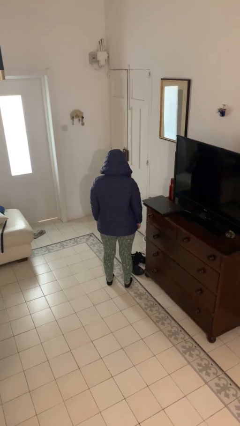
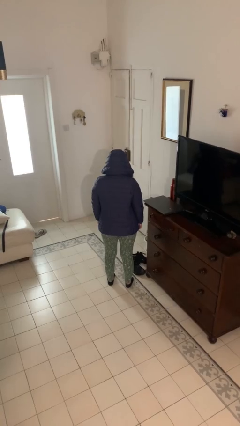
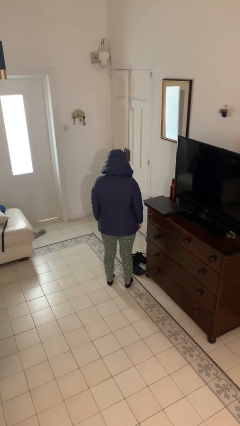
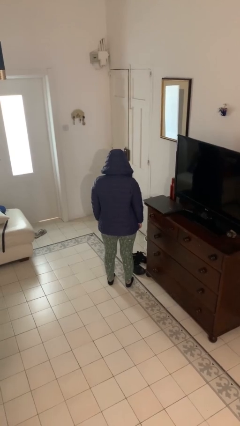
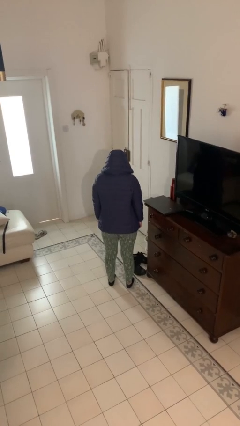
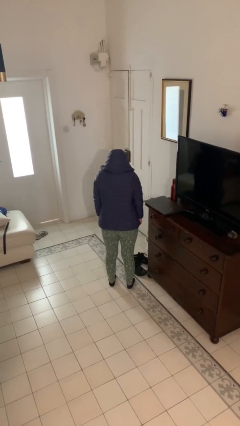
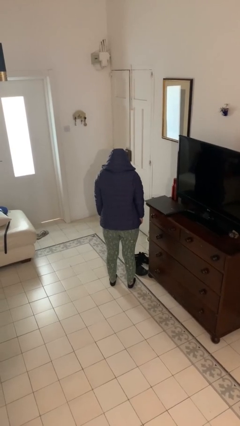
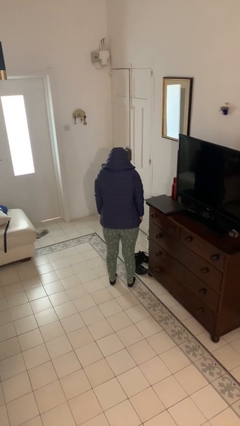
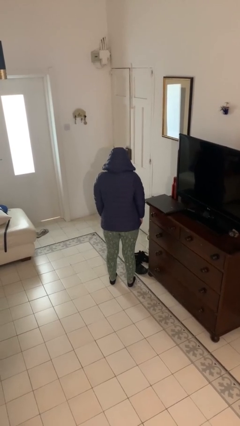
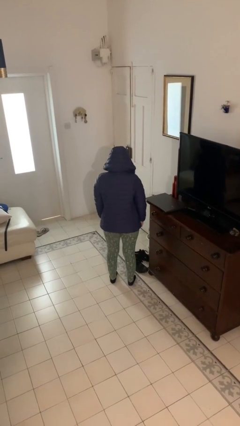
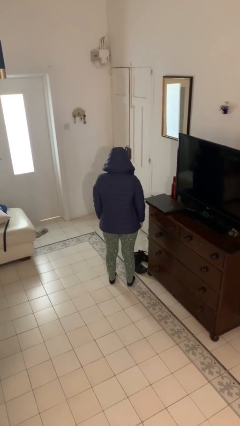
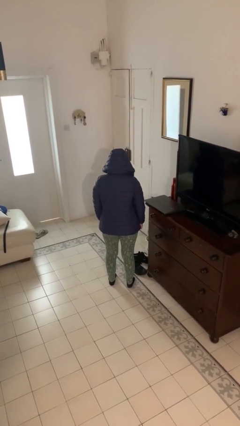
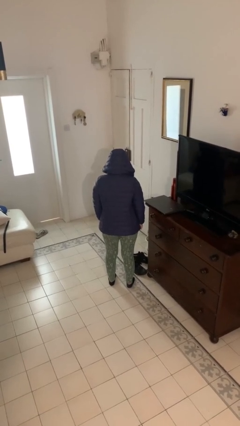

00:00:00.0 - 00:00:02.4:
person shrugs

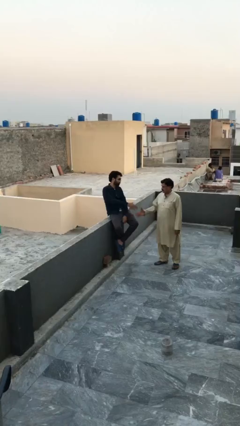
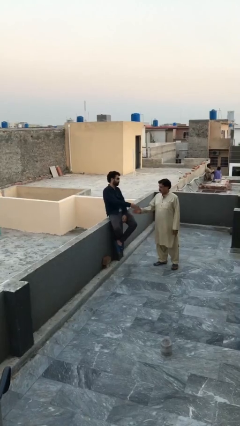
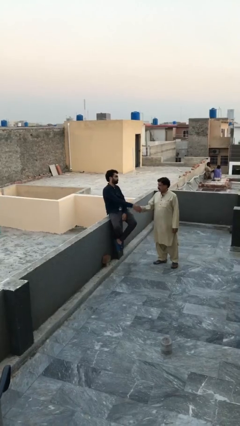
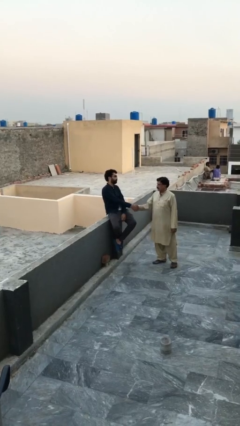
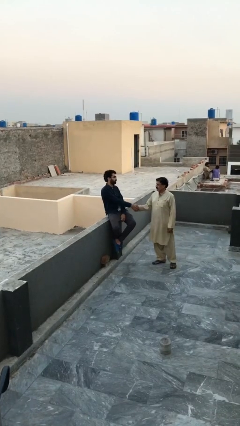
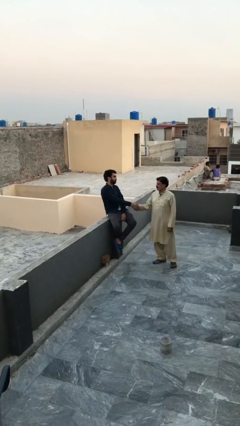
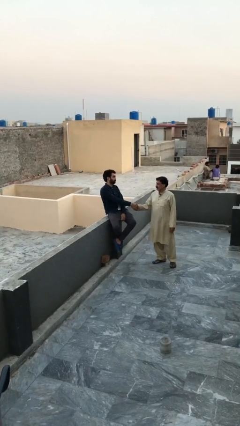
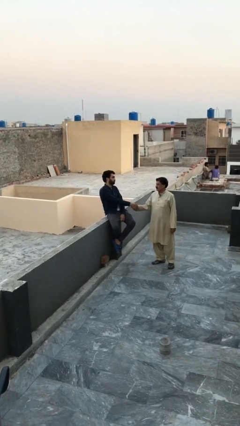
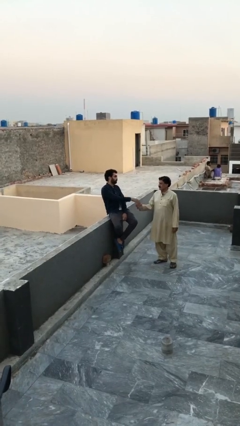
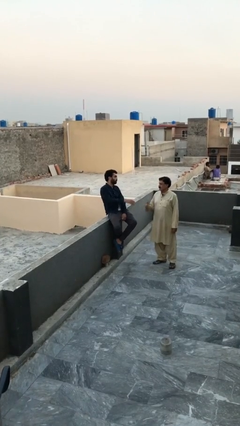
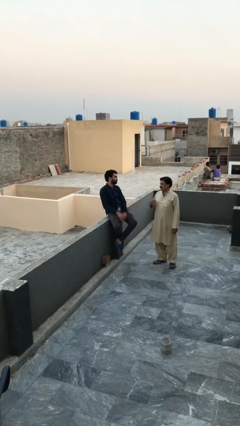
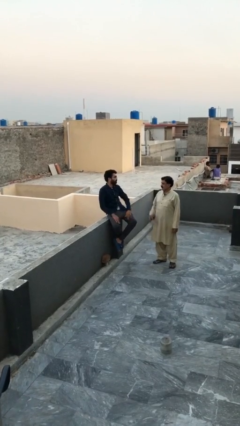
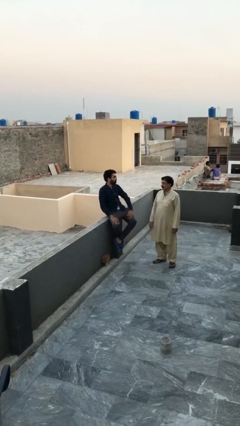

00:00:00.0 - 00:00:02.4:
person shakes hand

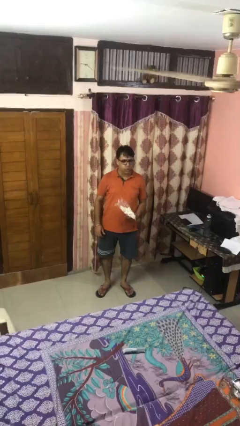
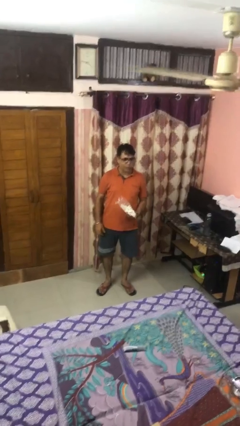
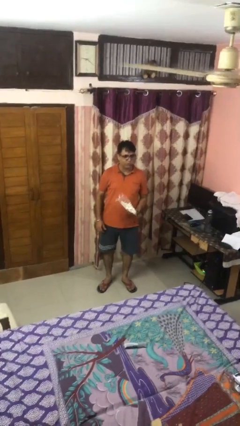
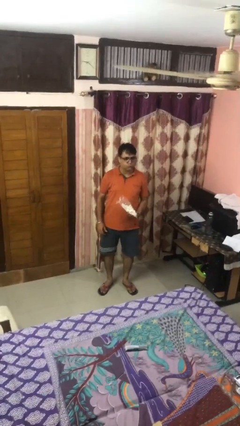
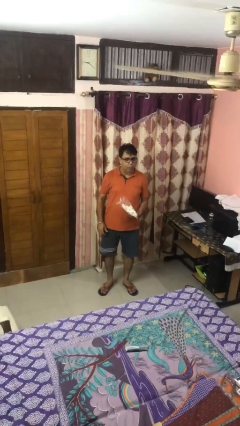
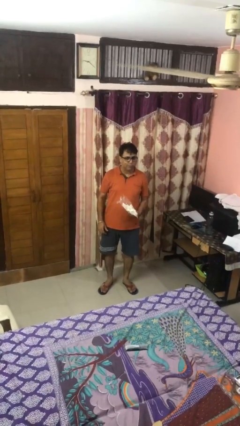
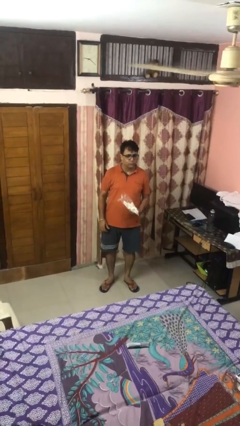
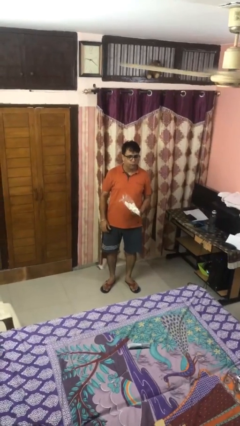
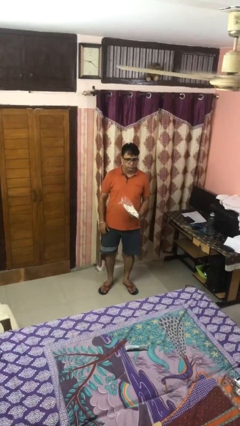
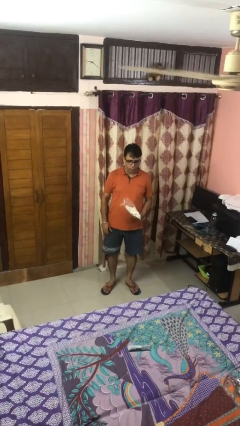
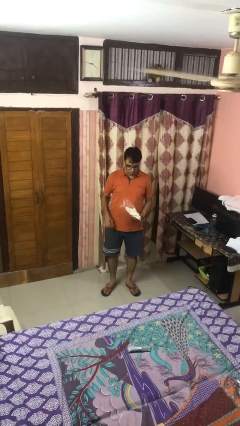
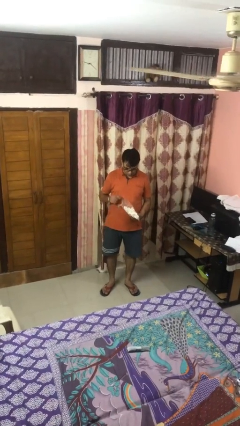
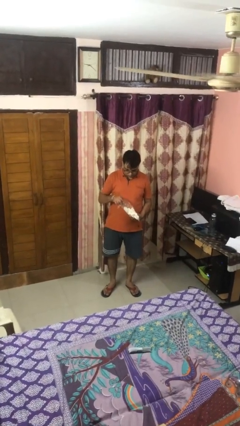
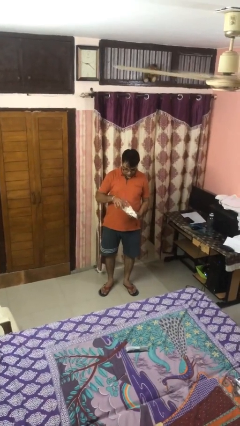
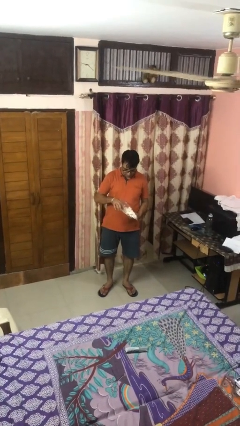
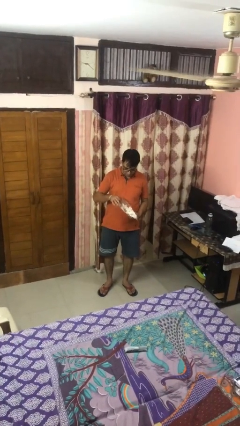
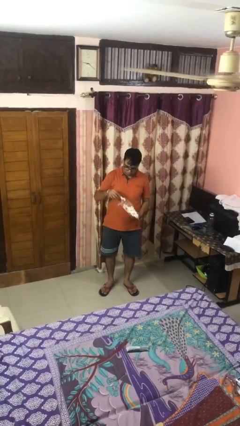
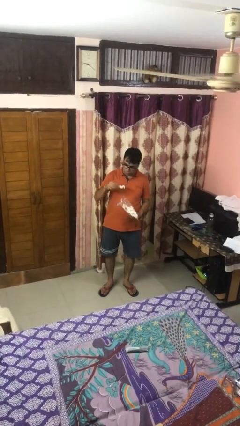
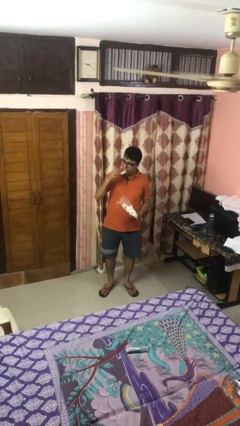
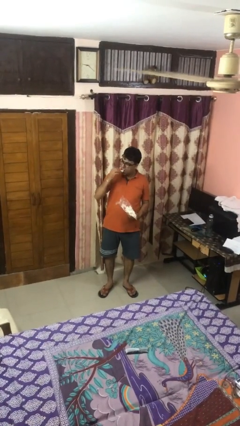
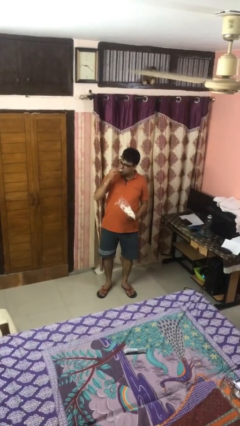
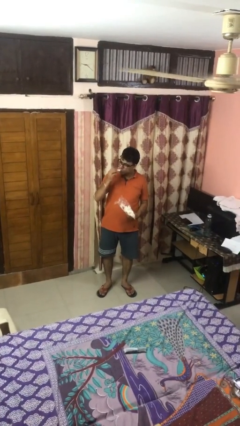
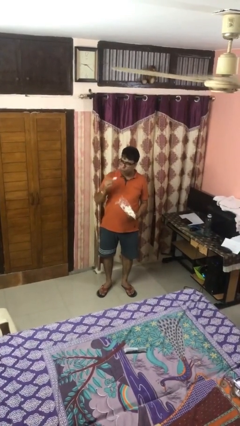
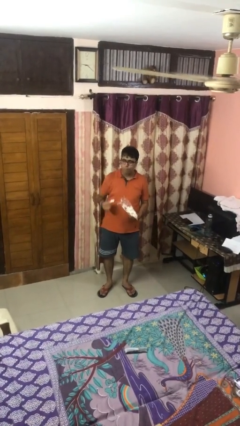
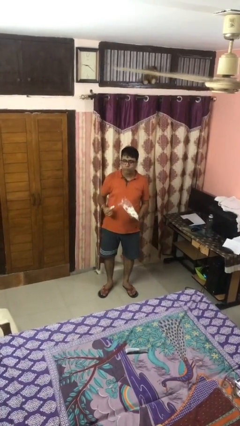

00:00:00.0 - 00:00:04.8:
person eats snack from bag

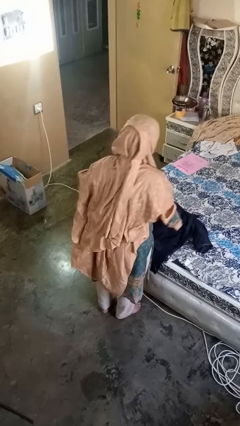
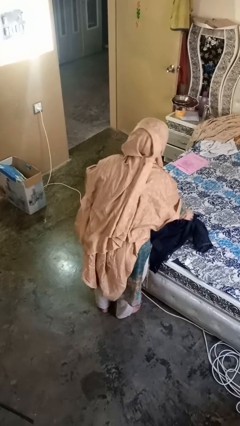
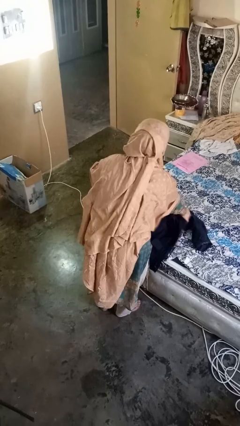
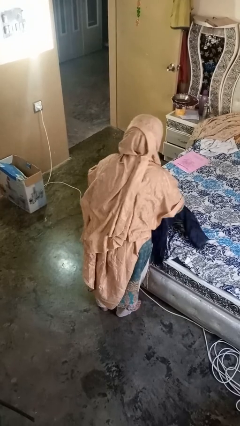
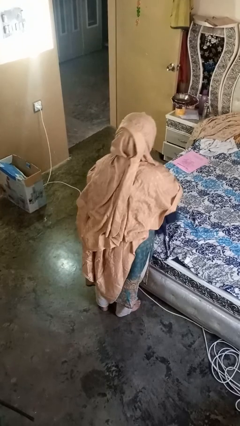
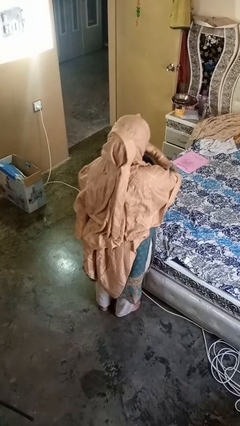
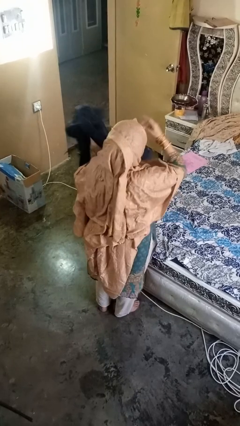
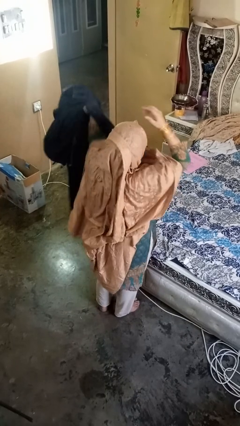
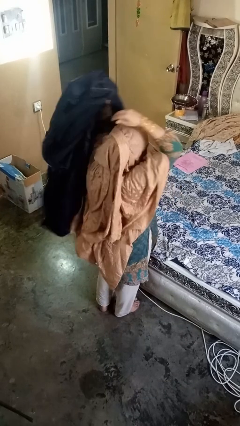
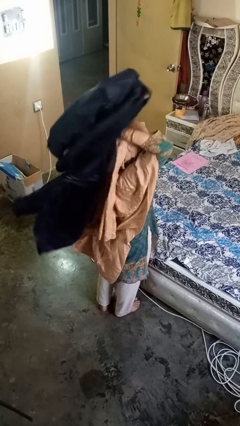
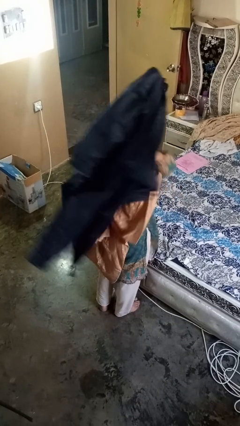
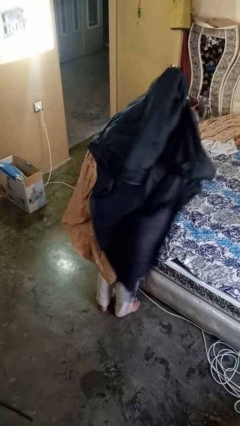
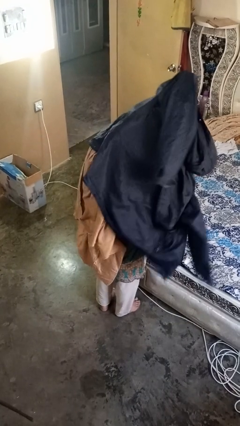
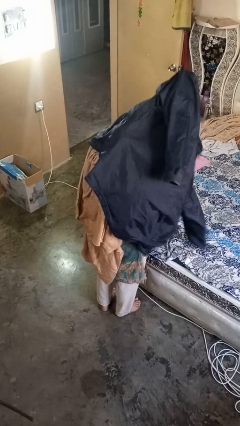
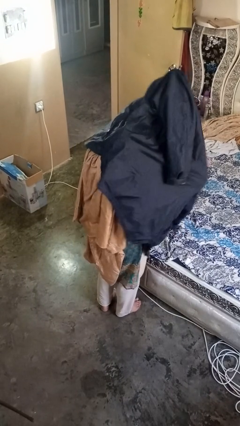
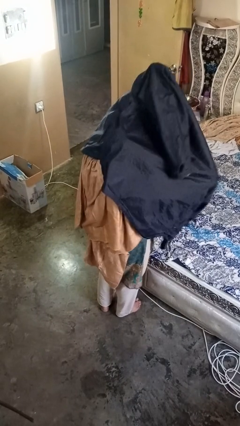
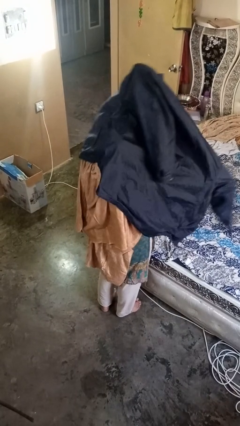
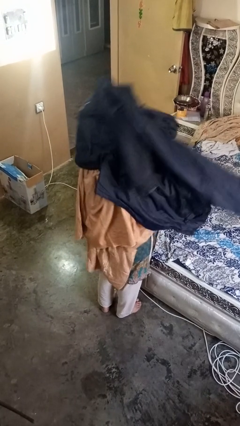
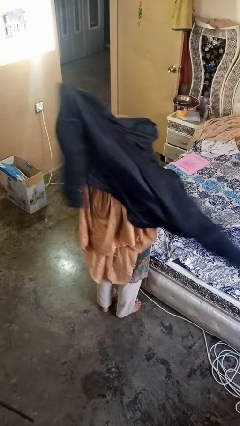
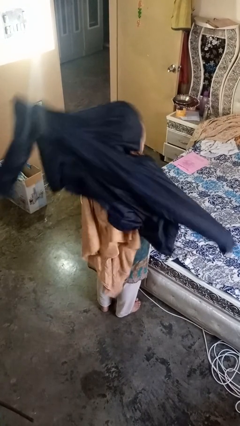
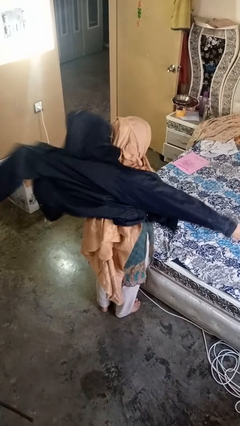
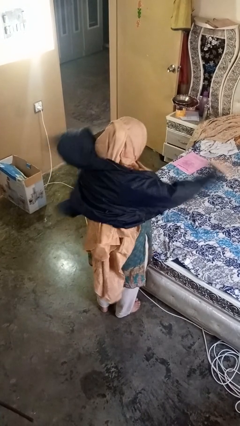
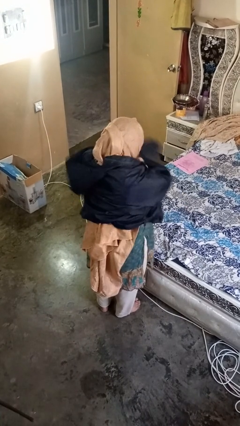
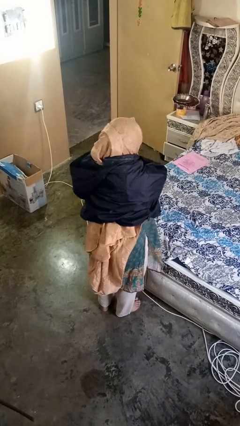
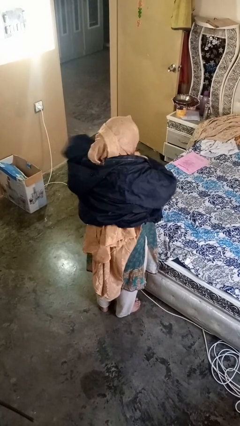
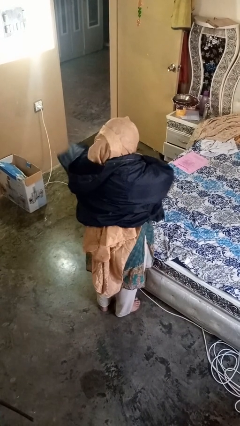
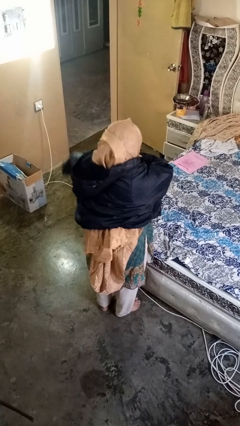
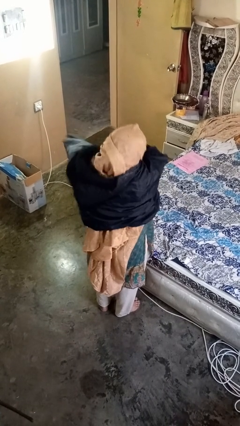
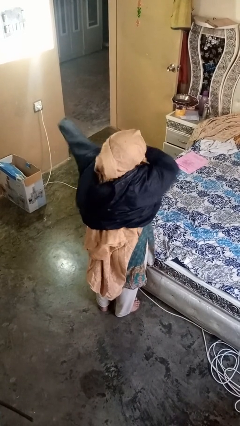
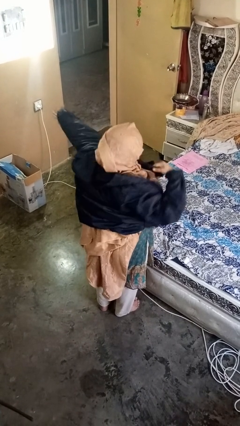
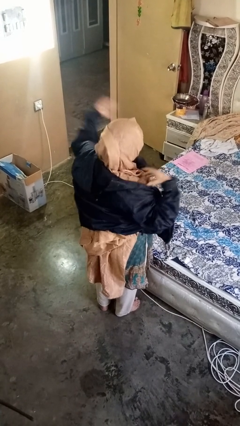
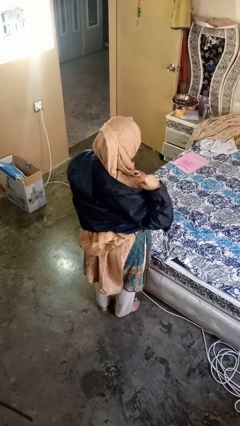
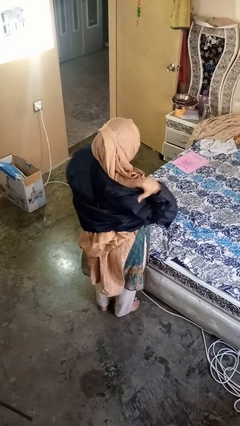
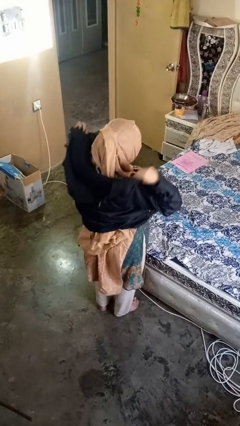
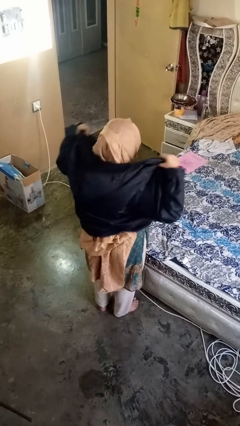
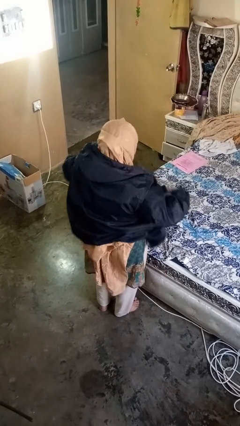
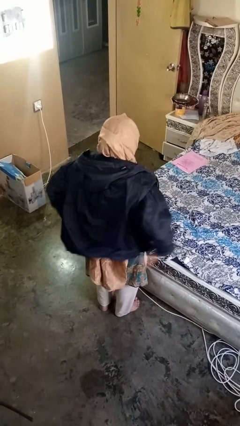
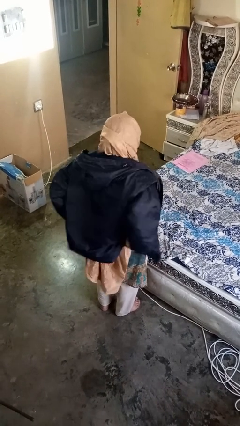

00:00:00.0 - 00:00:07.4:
person puts on jacket

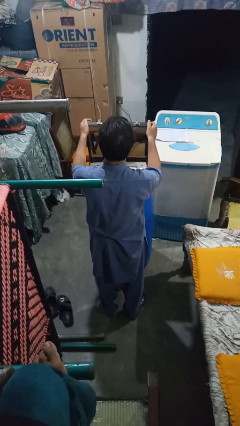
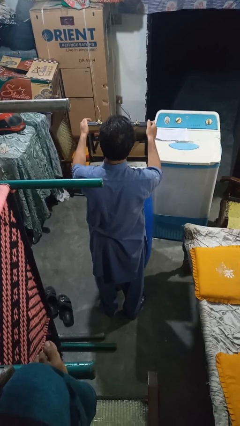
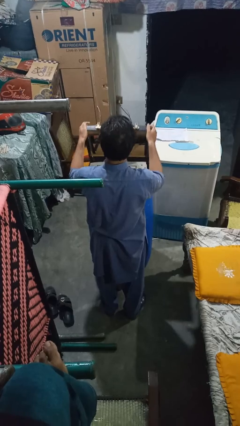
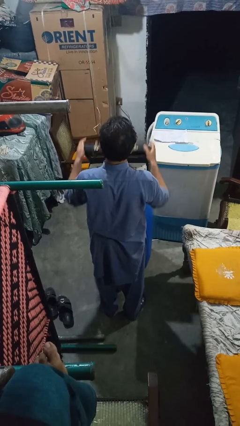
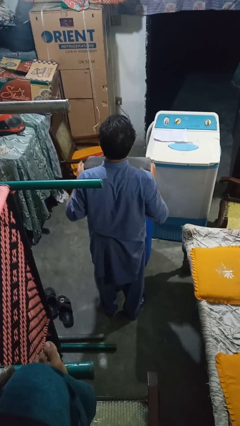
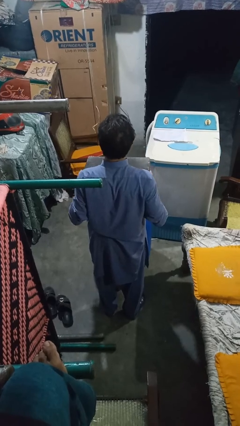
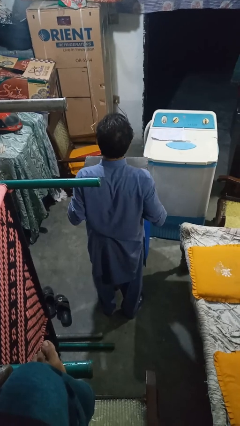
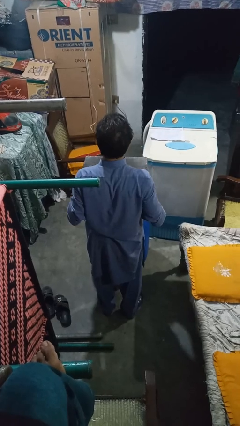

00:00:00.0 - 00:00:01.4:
person closes suitcase
